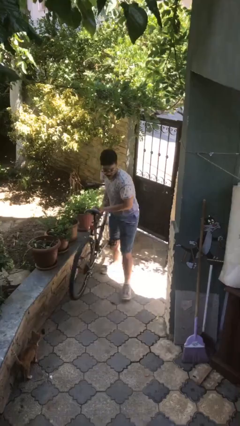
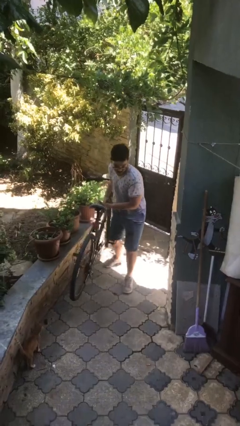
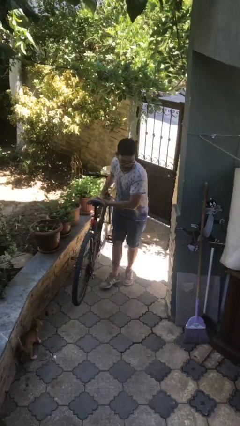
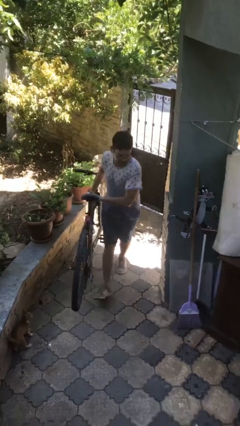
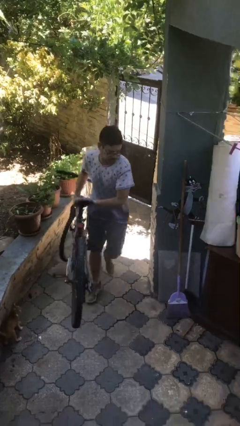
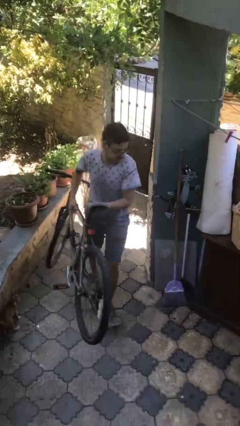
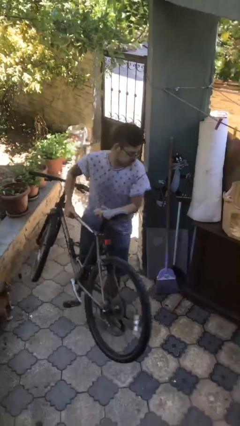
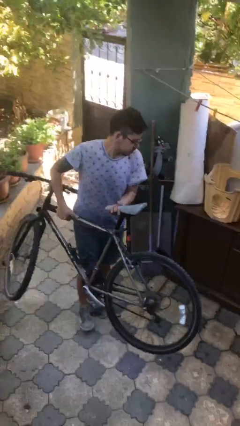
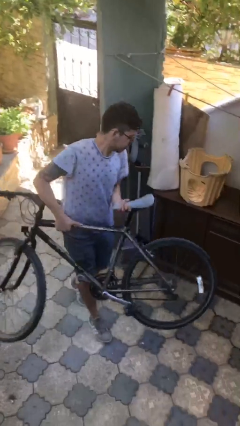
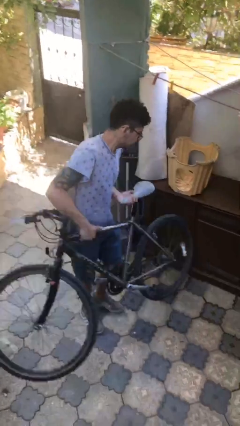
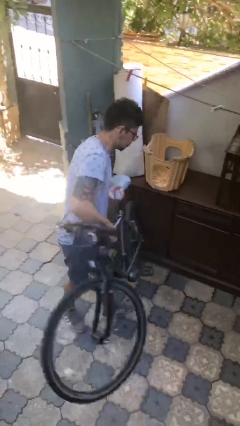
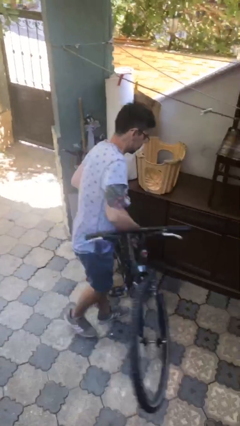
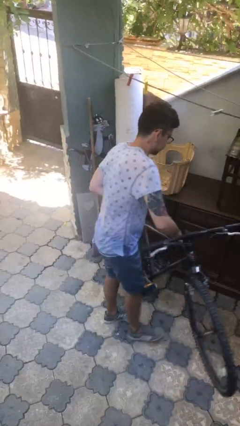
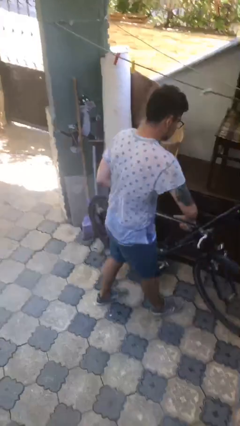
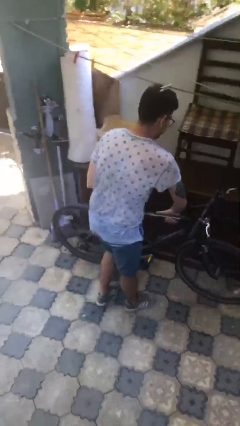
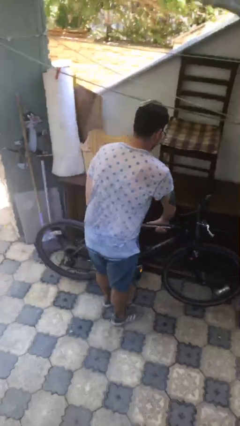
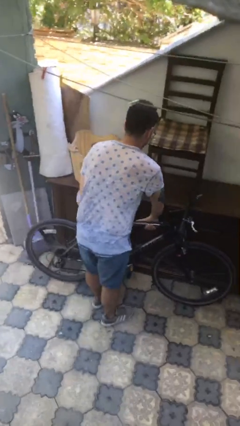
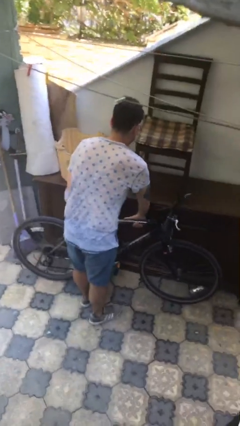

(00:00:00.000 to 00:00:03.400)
person carries heavy object

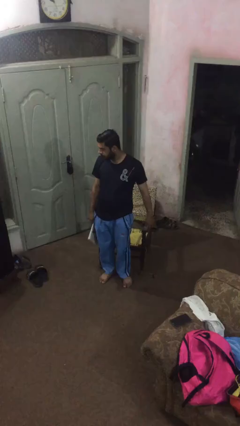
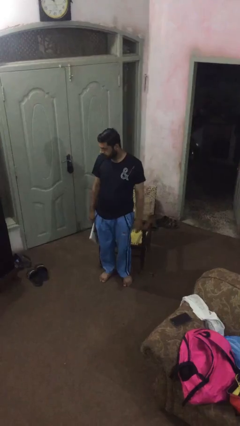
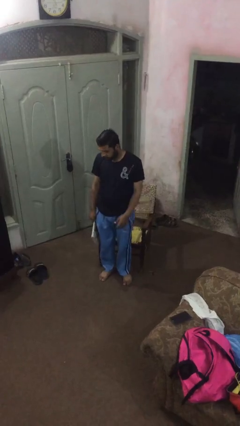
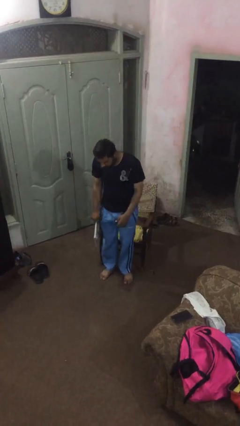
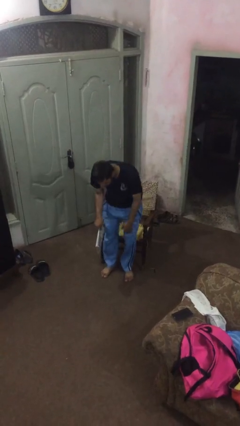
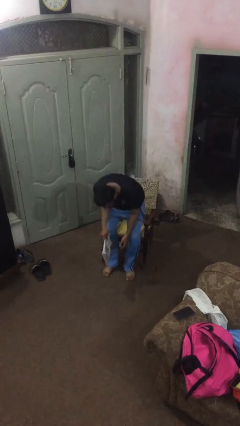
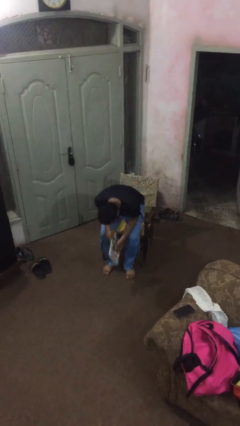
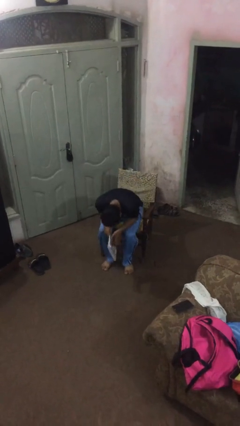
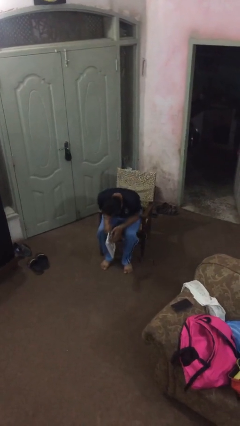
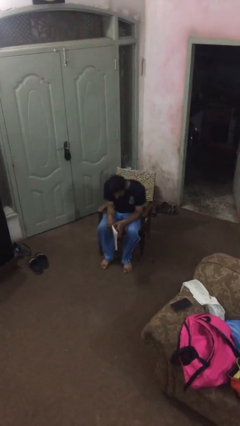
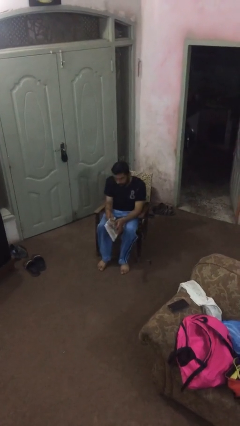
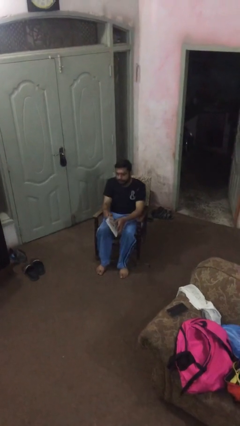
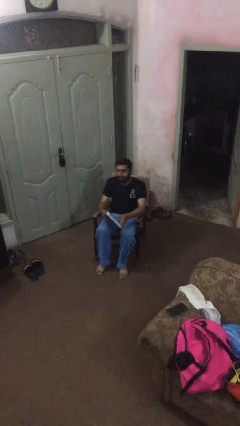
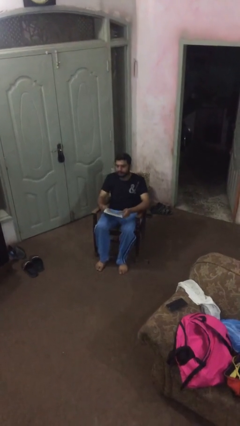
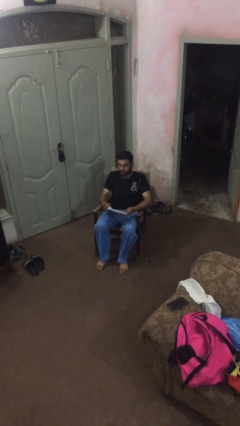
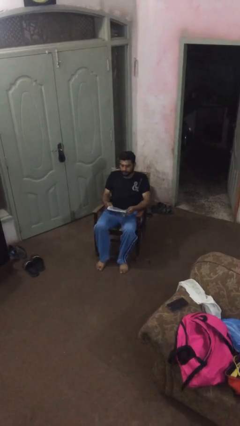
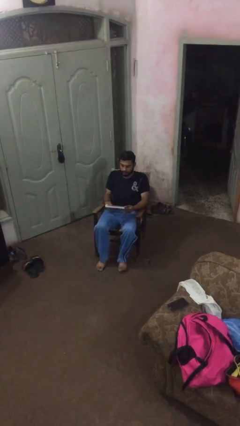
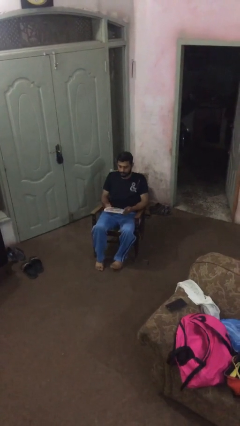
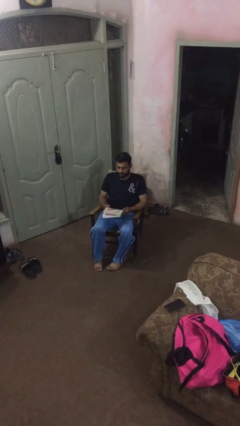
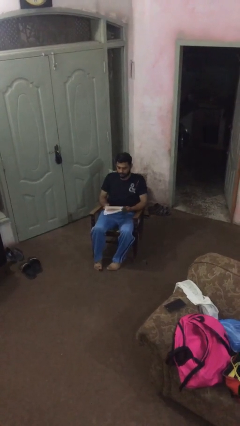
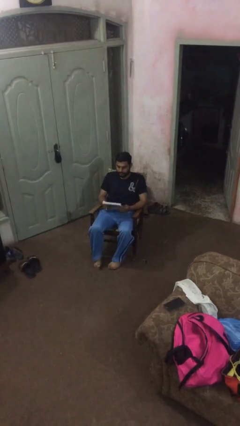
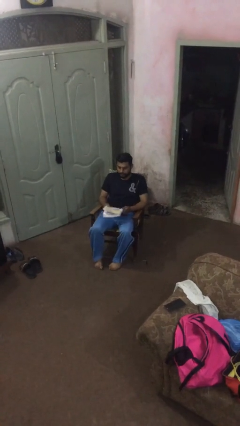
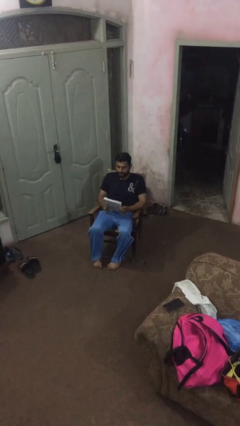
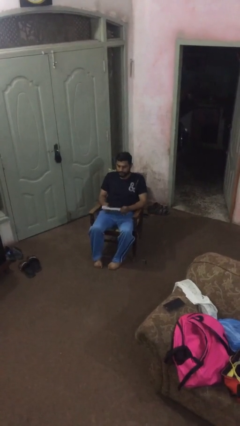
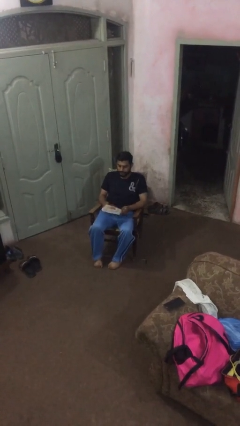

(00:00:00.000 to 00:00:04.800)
person sits down

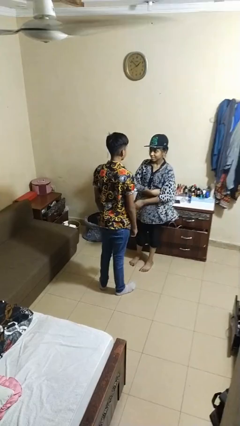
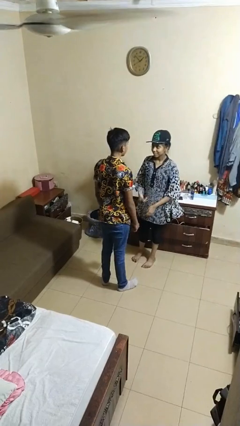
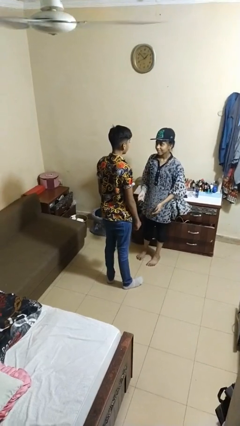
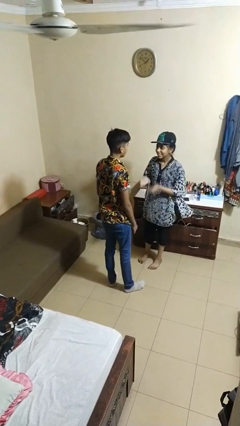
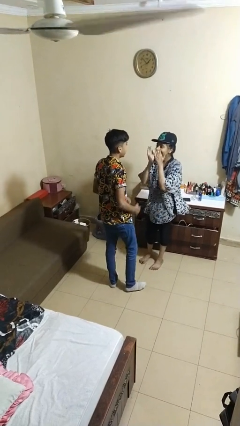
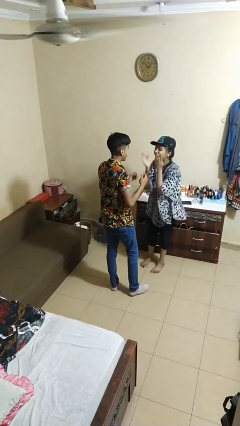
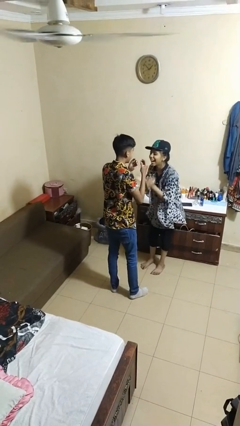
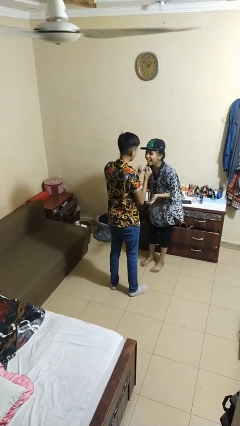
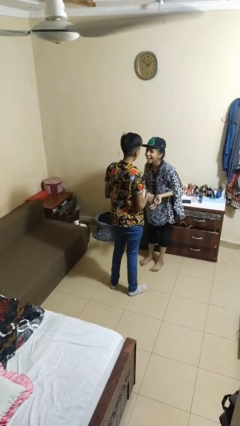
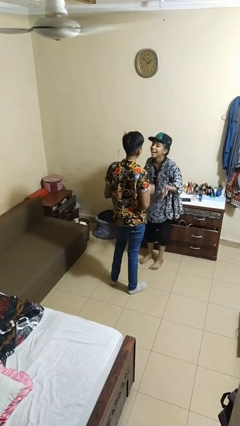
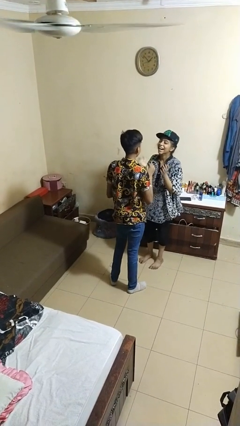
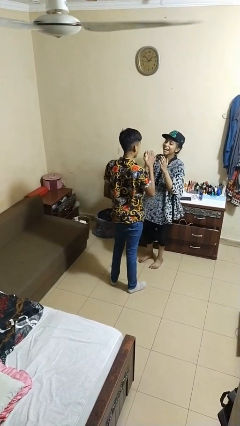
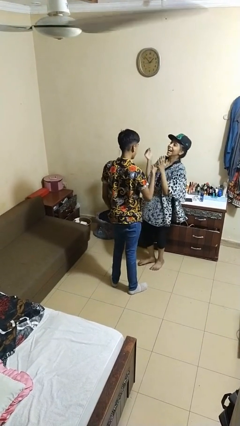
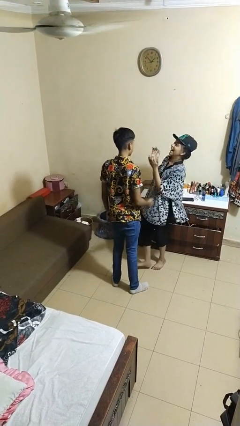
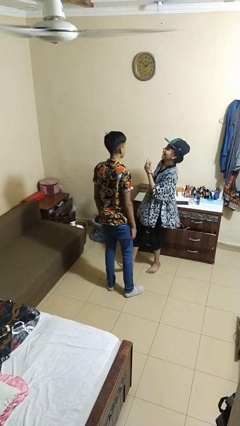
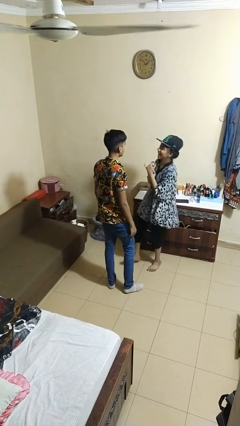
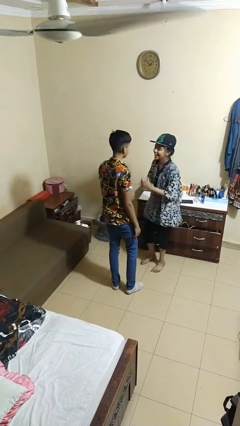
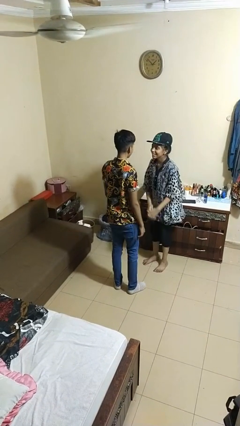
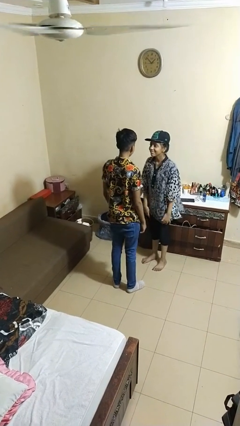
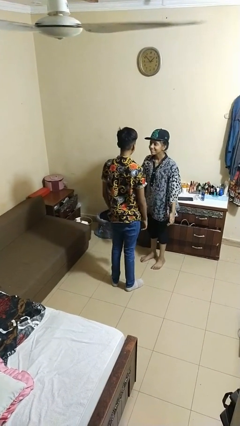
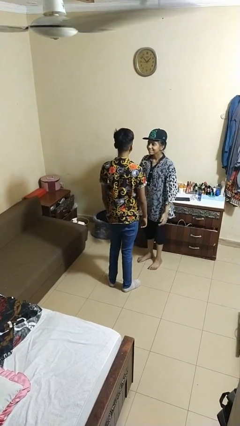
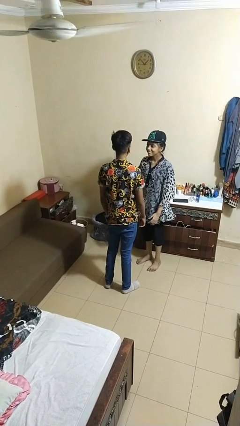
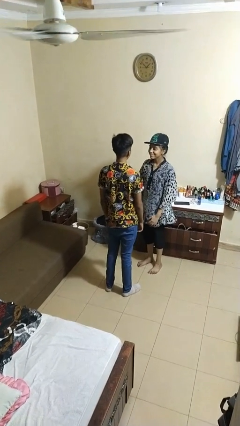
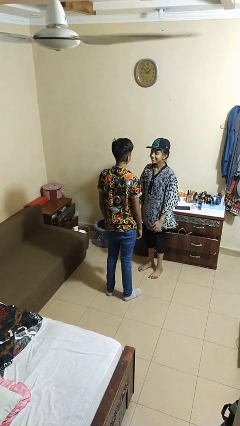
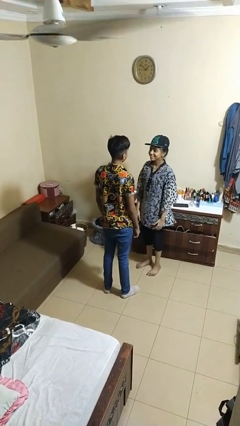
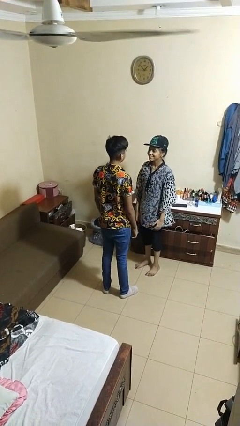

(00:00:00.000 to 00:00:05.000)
person laughs with person

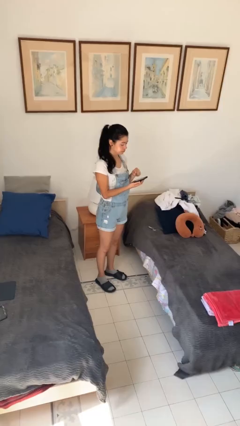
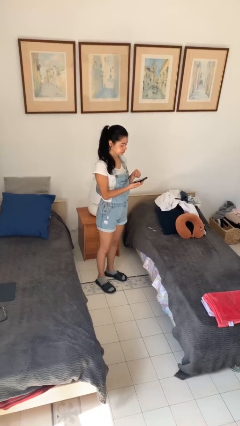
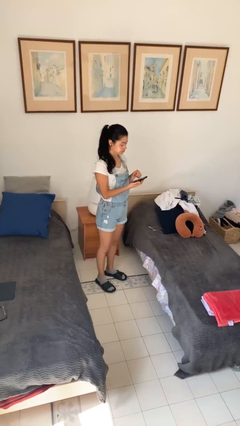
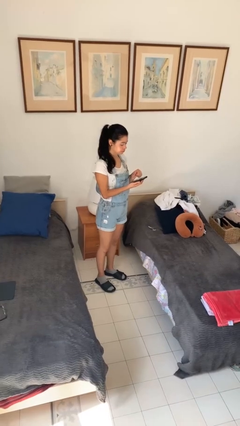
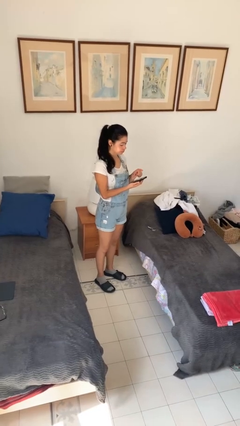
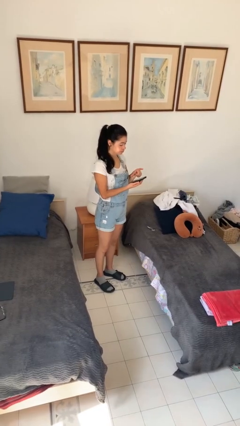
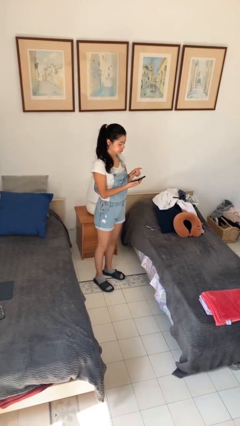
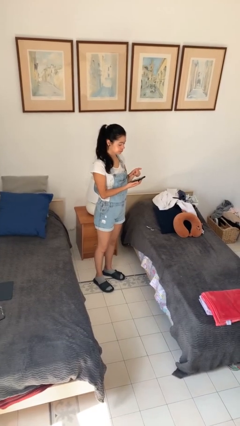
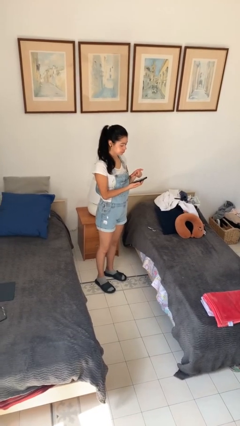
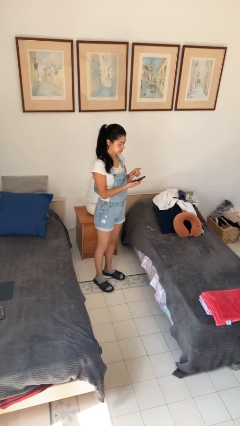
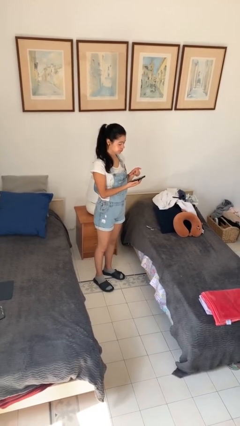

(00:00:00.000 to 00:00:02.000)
person gestures zoom out

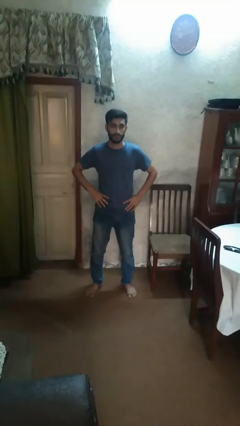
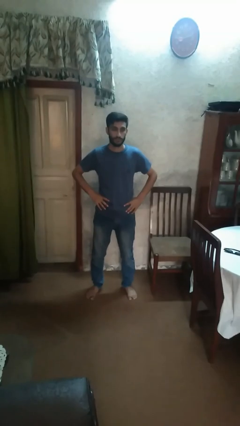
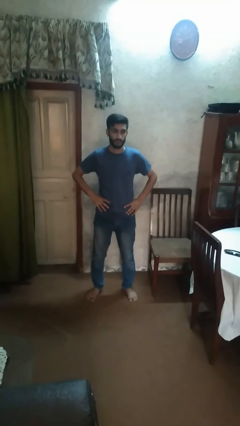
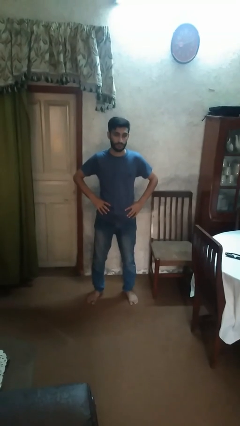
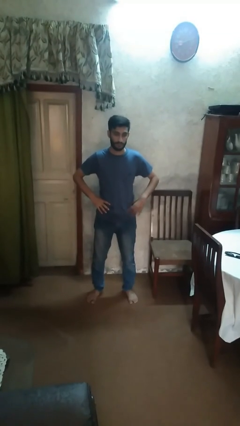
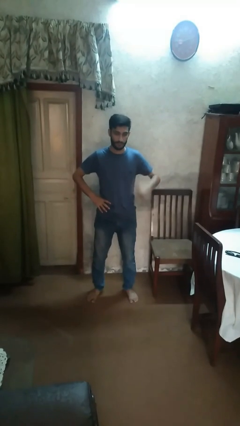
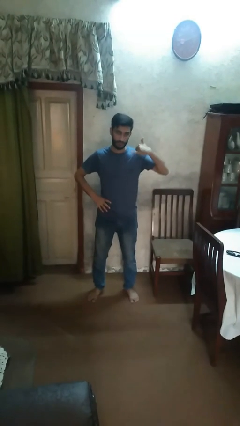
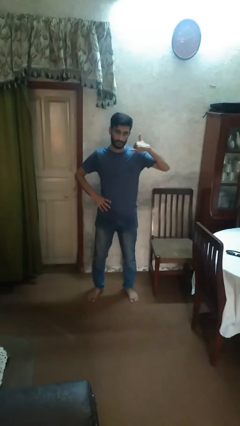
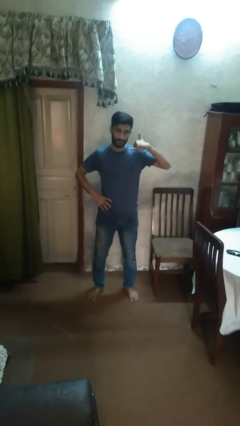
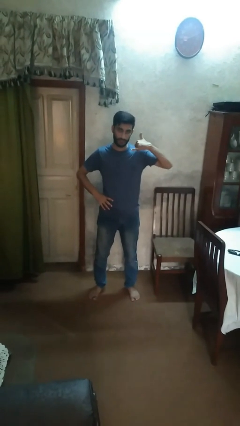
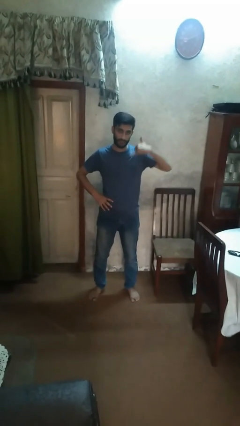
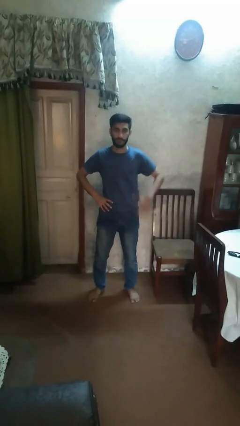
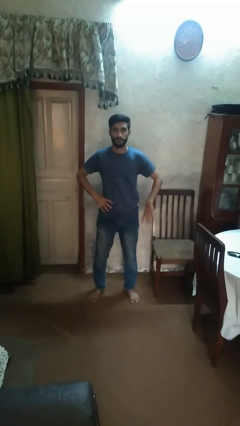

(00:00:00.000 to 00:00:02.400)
person gestures call me
